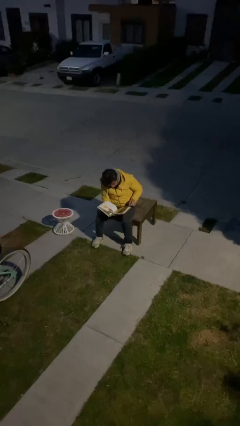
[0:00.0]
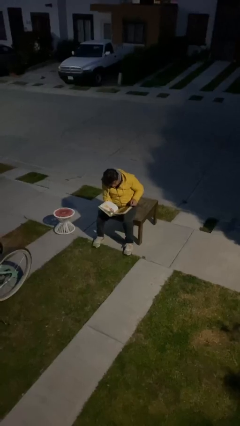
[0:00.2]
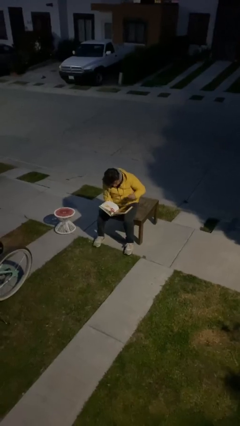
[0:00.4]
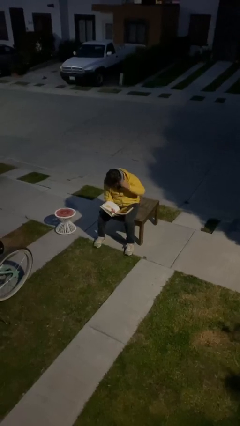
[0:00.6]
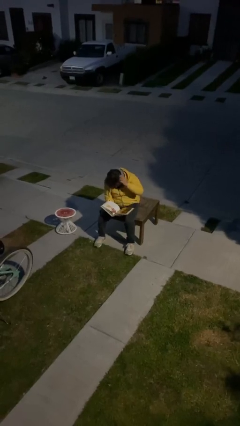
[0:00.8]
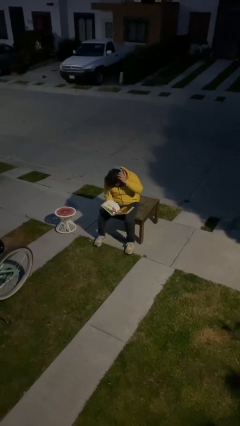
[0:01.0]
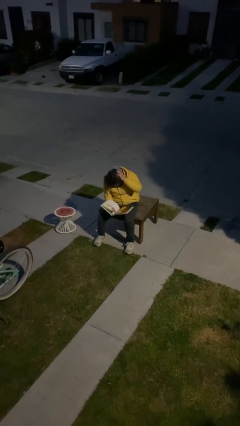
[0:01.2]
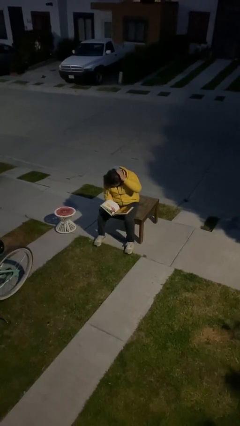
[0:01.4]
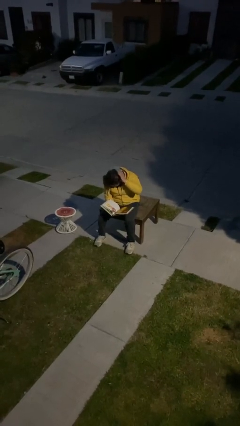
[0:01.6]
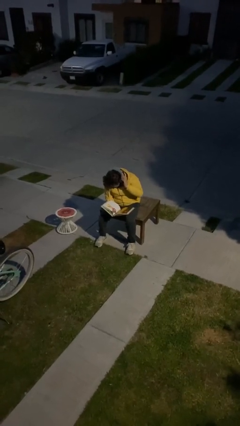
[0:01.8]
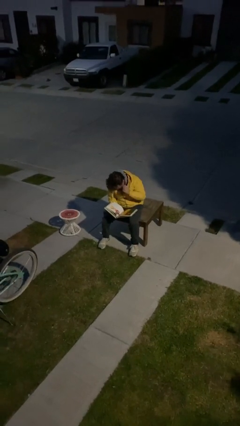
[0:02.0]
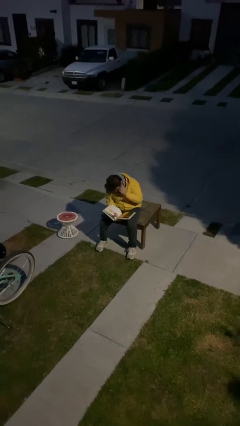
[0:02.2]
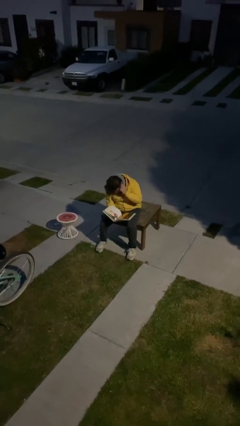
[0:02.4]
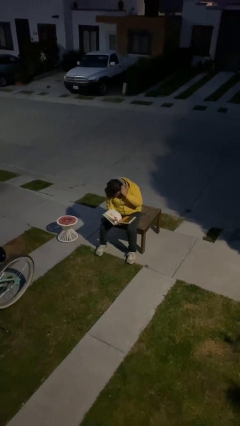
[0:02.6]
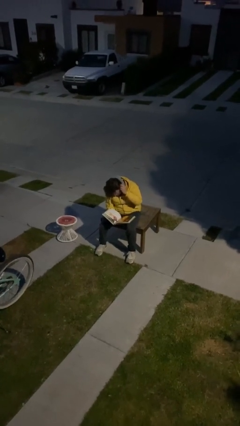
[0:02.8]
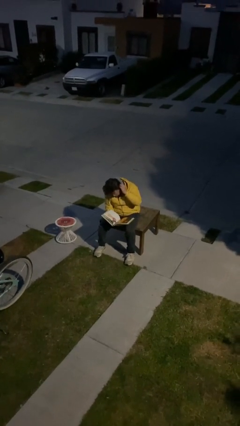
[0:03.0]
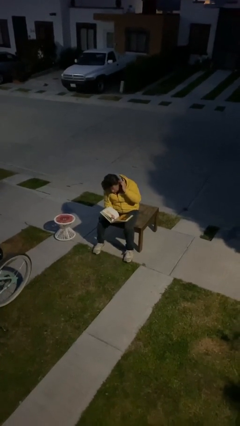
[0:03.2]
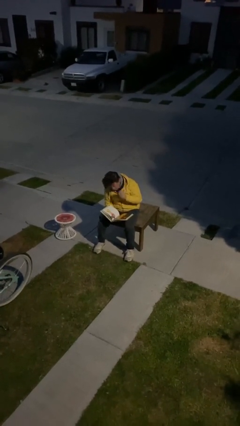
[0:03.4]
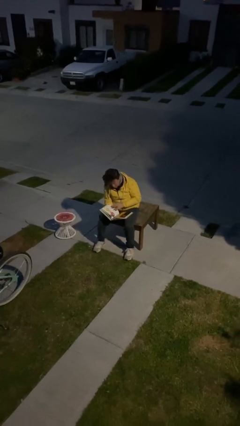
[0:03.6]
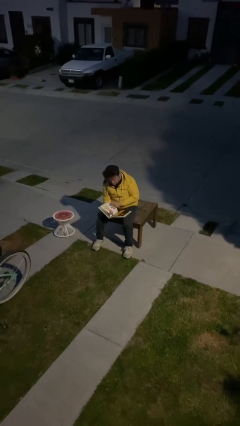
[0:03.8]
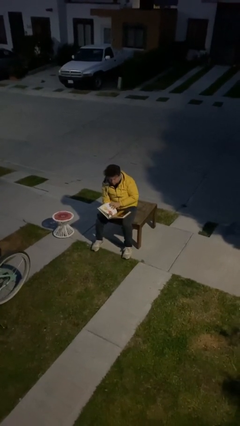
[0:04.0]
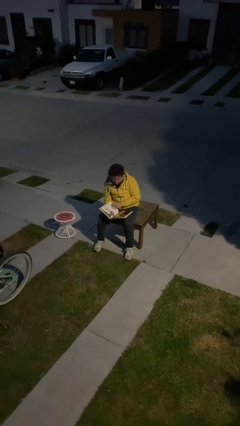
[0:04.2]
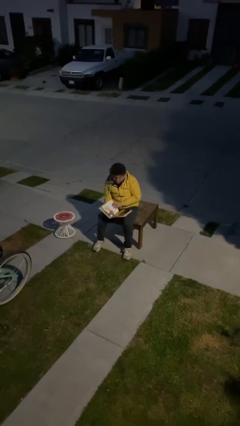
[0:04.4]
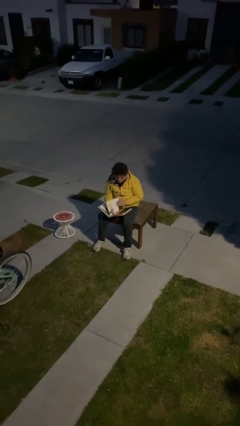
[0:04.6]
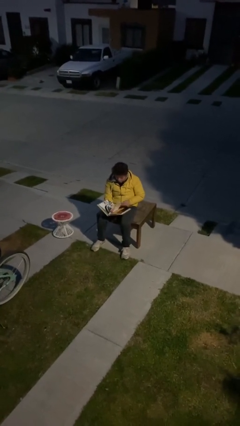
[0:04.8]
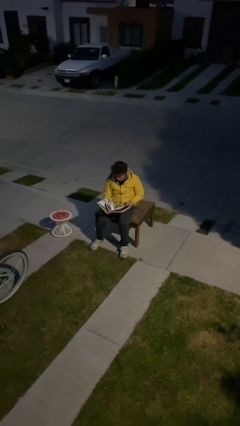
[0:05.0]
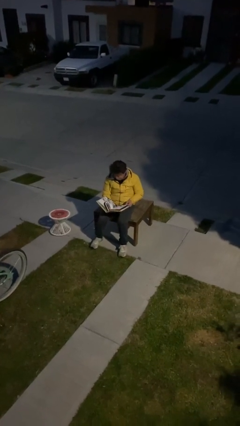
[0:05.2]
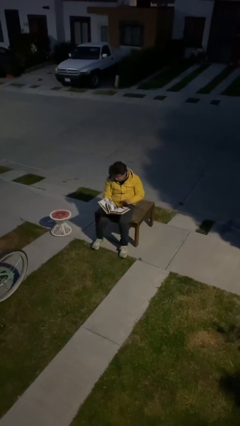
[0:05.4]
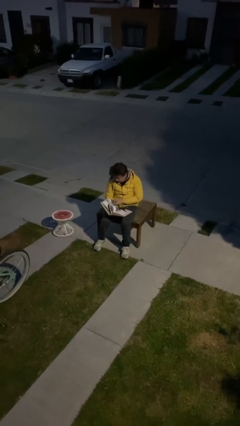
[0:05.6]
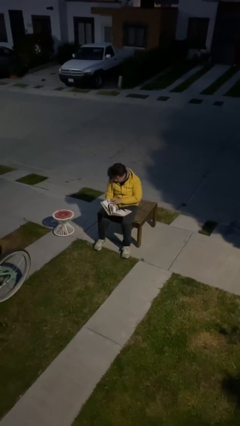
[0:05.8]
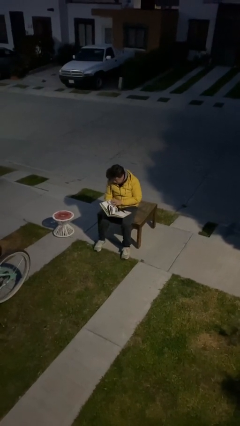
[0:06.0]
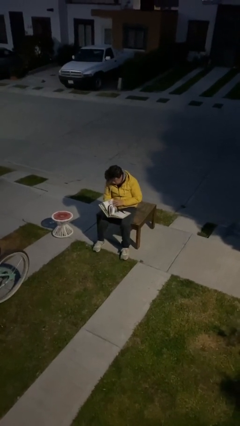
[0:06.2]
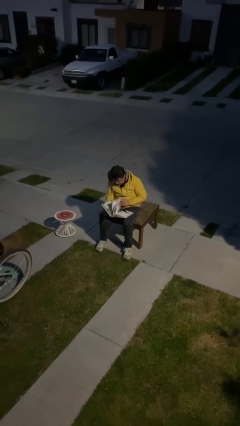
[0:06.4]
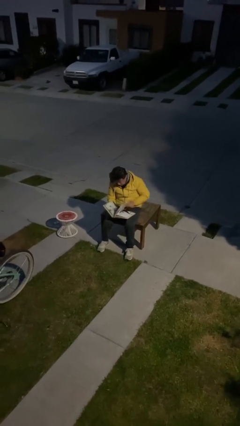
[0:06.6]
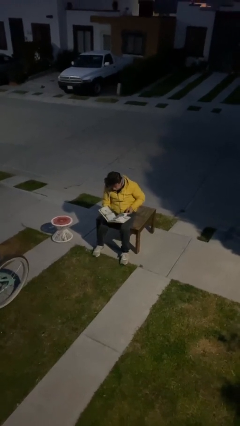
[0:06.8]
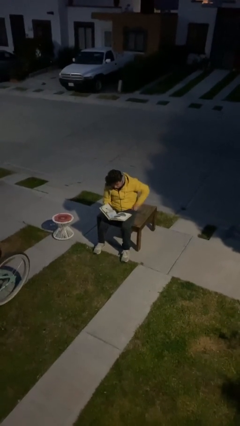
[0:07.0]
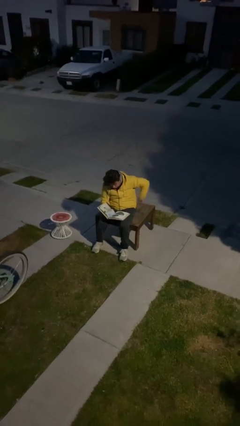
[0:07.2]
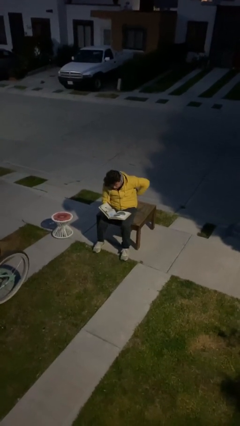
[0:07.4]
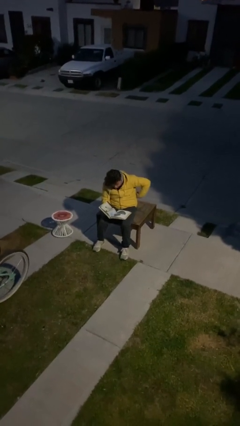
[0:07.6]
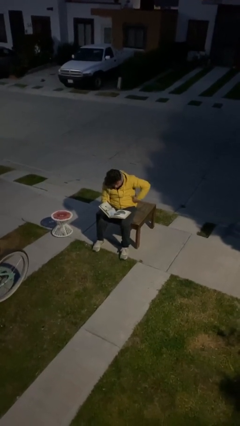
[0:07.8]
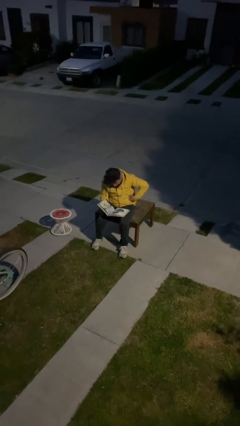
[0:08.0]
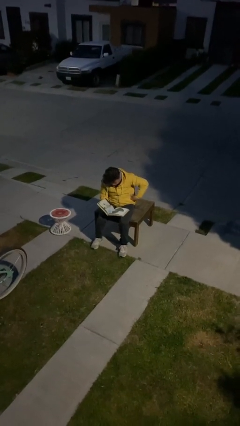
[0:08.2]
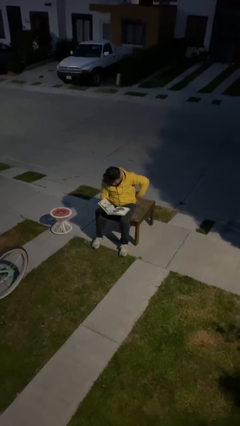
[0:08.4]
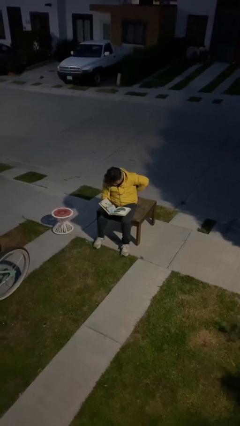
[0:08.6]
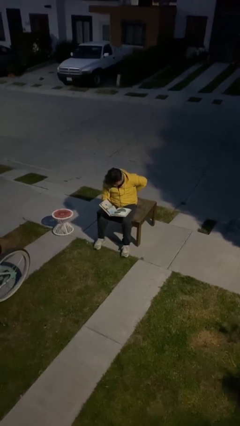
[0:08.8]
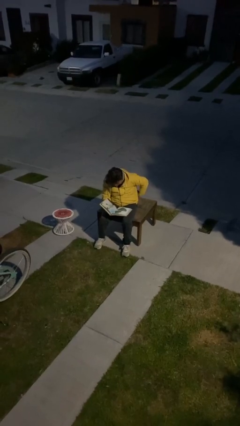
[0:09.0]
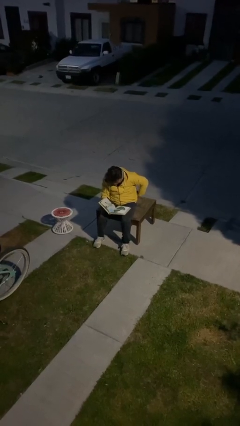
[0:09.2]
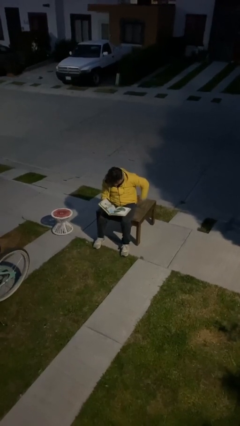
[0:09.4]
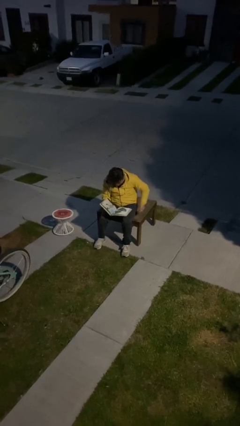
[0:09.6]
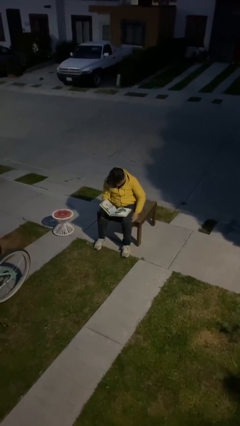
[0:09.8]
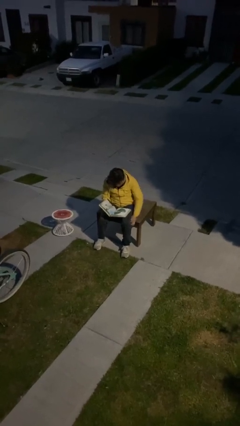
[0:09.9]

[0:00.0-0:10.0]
person reads document

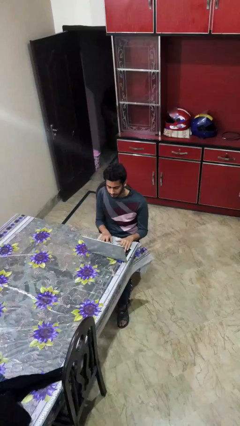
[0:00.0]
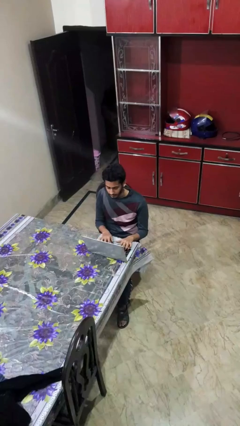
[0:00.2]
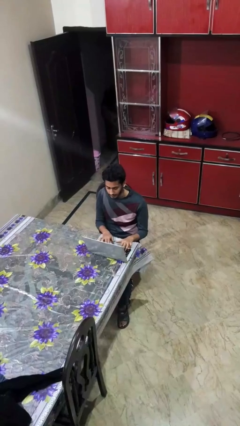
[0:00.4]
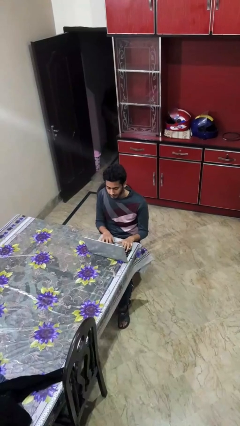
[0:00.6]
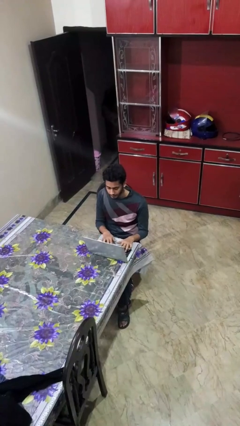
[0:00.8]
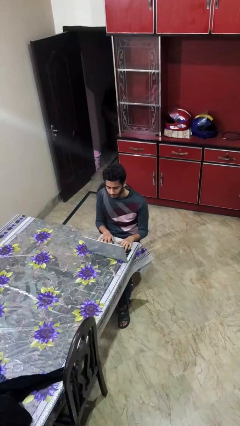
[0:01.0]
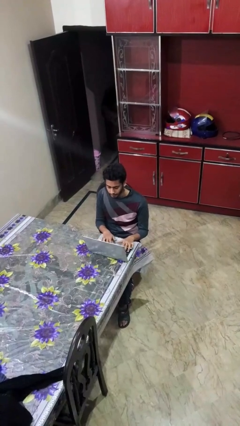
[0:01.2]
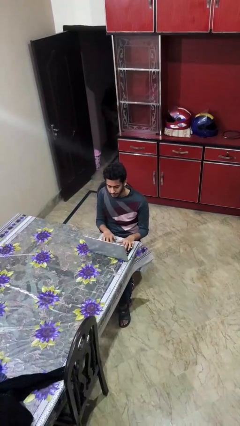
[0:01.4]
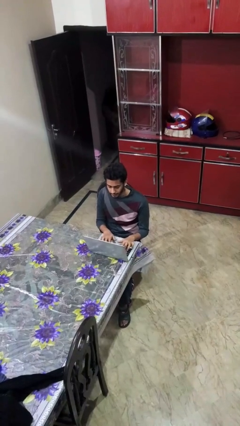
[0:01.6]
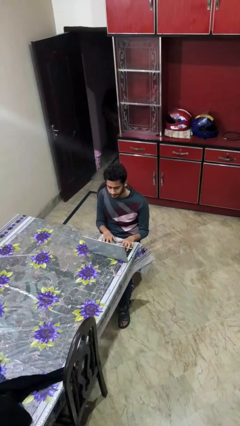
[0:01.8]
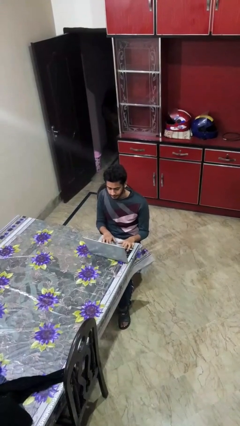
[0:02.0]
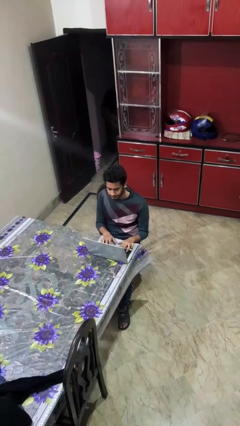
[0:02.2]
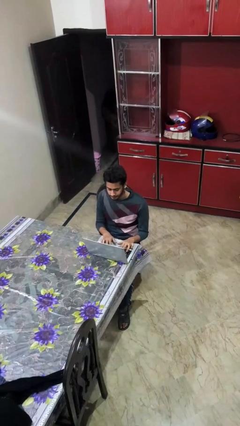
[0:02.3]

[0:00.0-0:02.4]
person interacts with laptop

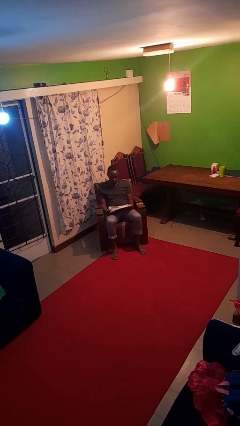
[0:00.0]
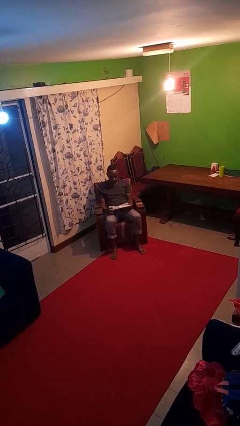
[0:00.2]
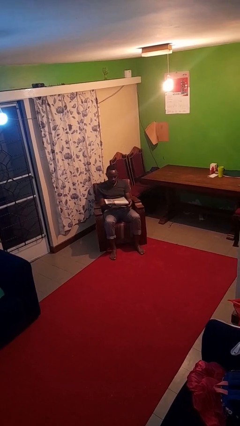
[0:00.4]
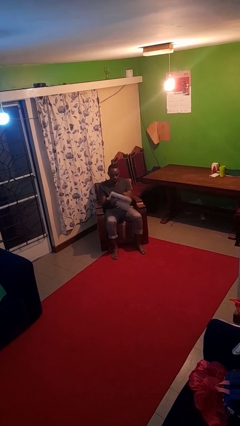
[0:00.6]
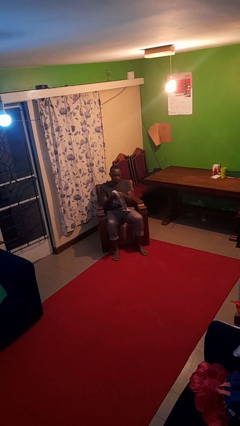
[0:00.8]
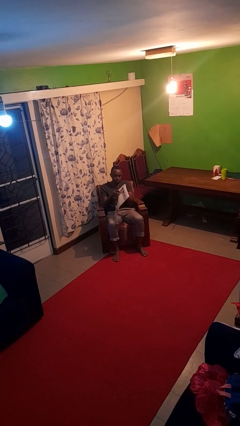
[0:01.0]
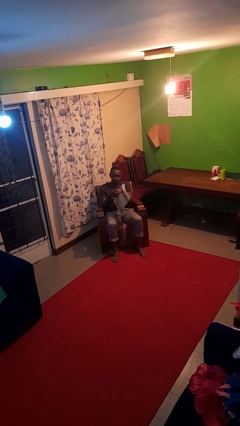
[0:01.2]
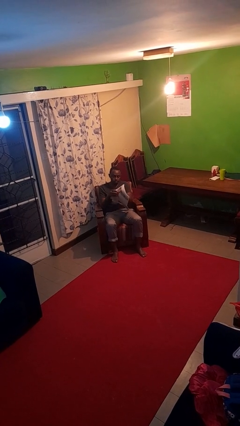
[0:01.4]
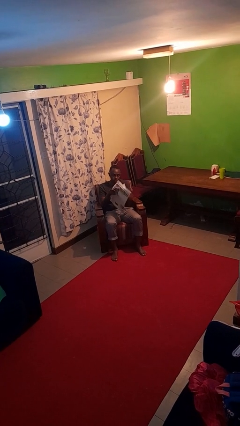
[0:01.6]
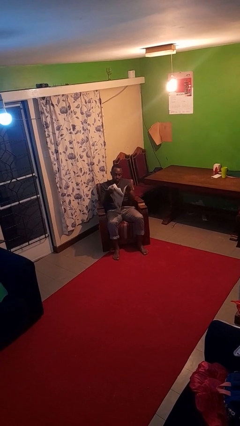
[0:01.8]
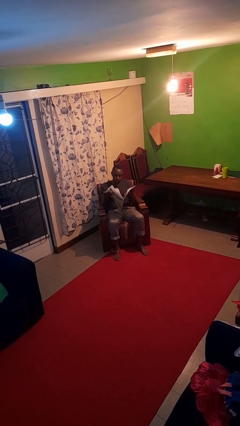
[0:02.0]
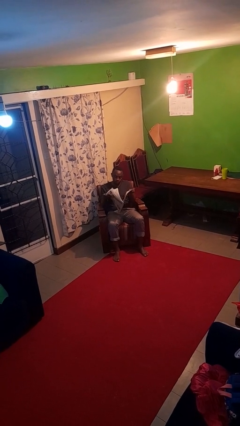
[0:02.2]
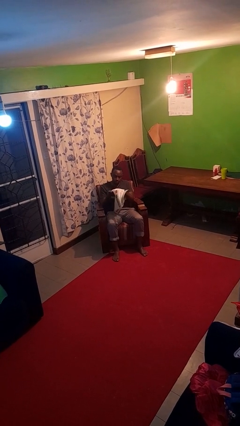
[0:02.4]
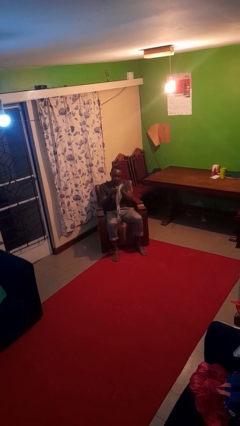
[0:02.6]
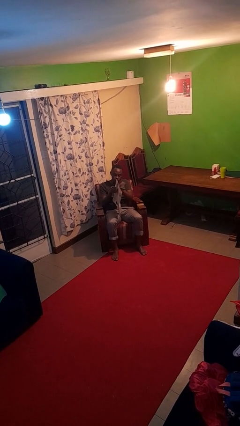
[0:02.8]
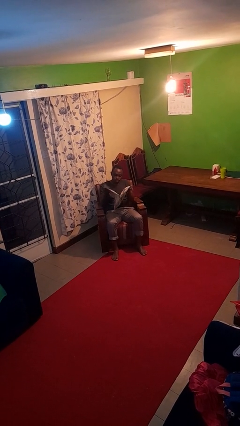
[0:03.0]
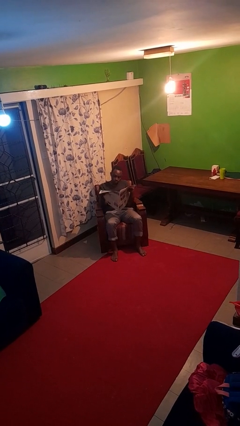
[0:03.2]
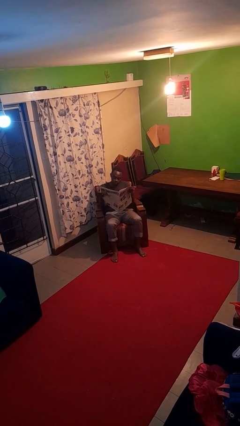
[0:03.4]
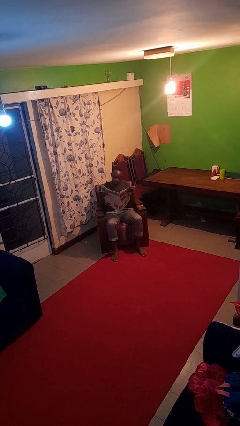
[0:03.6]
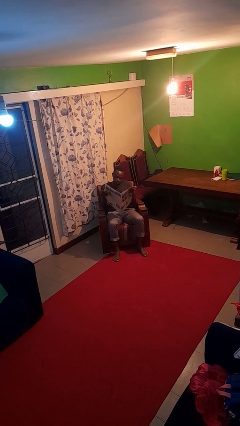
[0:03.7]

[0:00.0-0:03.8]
person reads newspaper

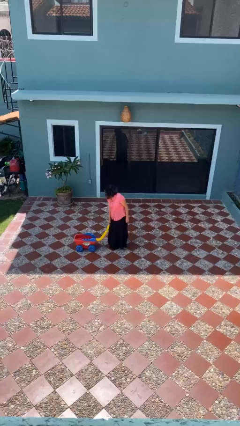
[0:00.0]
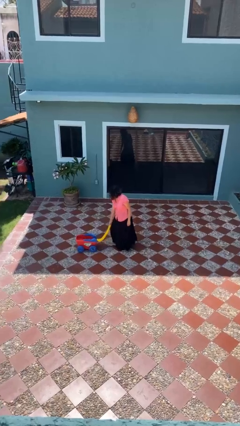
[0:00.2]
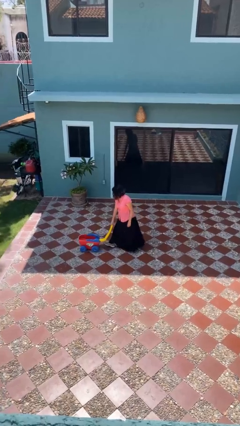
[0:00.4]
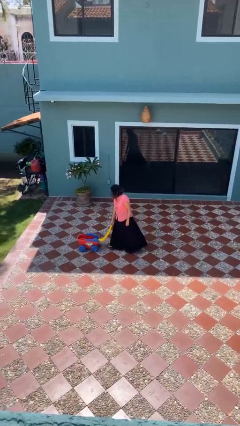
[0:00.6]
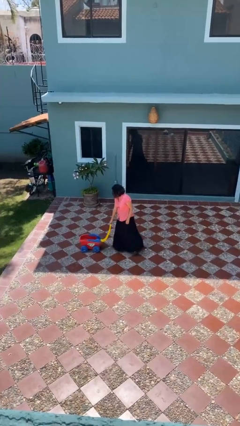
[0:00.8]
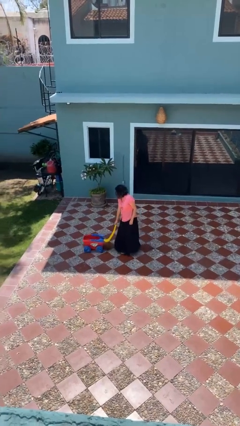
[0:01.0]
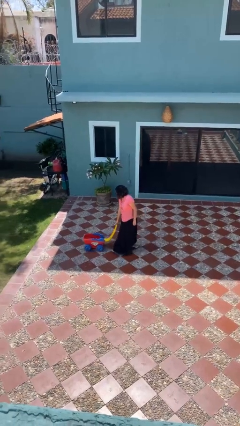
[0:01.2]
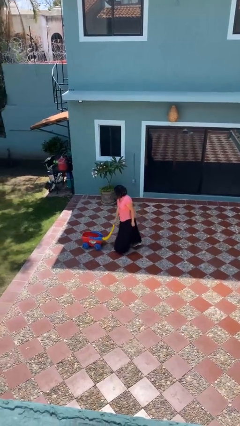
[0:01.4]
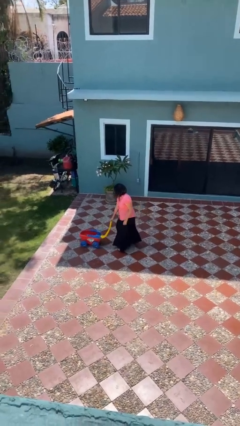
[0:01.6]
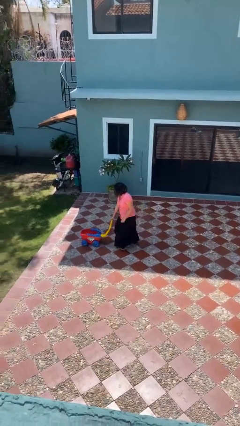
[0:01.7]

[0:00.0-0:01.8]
person pushes wheeled cart
